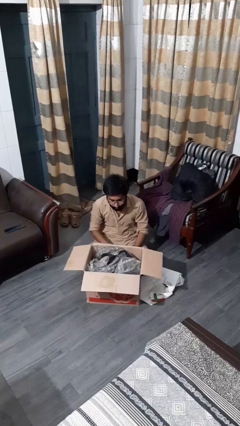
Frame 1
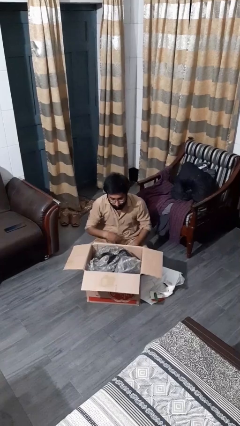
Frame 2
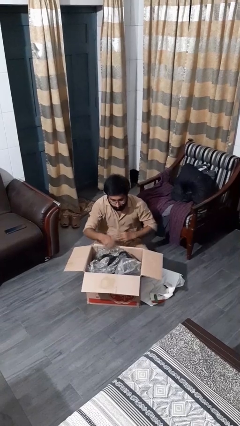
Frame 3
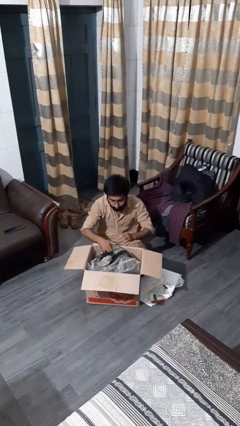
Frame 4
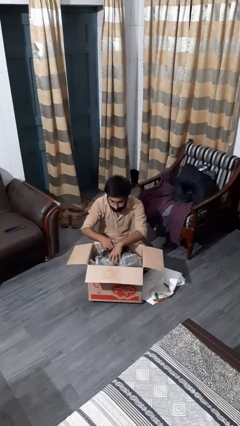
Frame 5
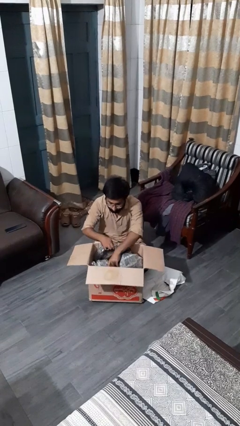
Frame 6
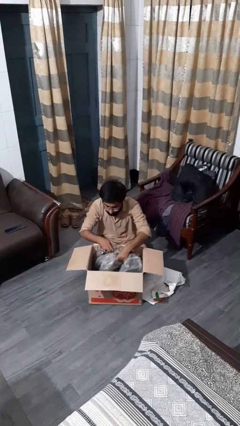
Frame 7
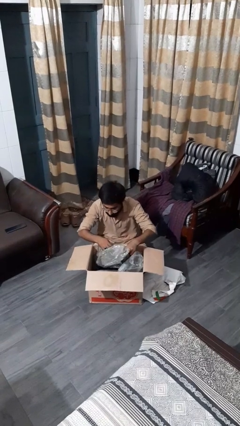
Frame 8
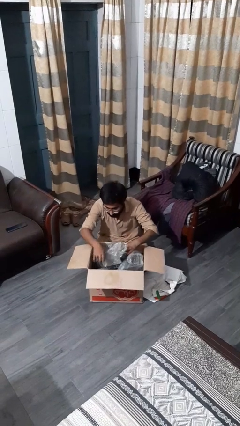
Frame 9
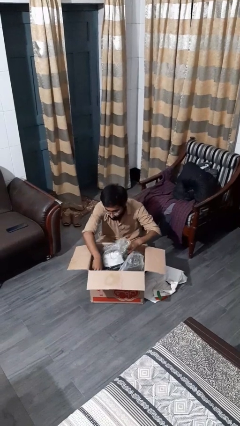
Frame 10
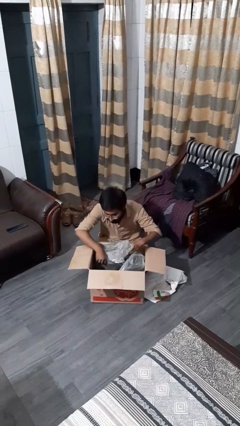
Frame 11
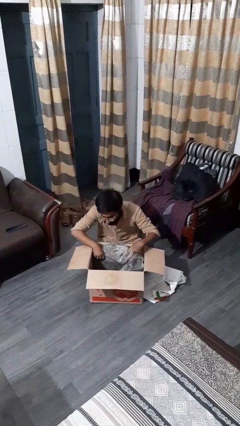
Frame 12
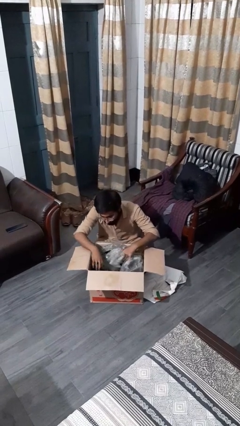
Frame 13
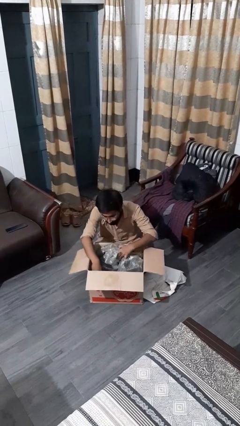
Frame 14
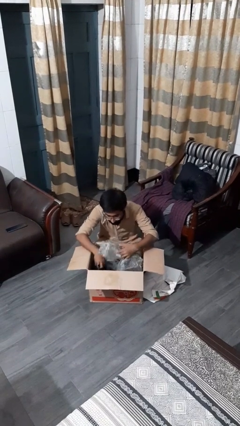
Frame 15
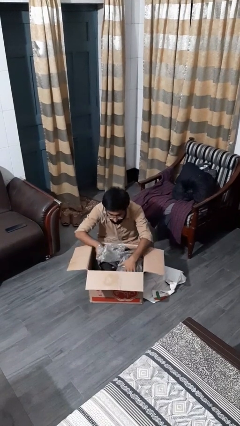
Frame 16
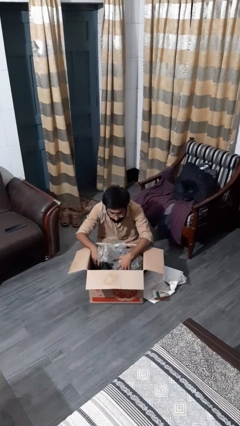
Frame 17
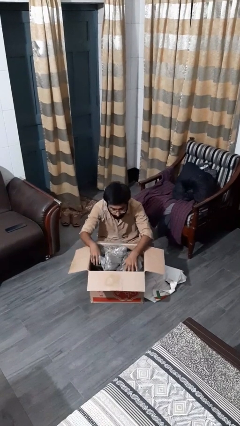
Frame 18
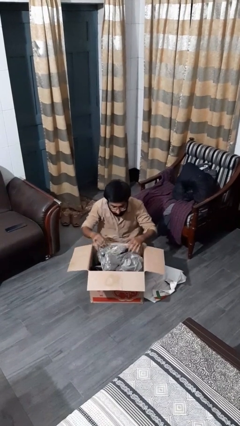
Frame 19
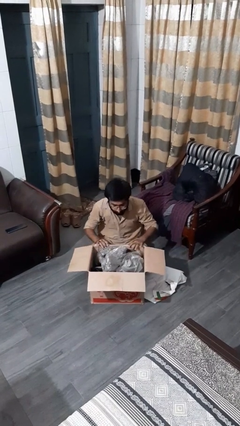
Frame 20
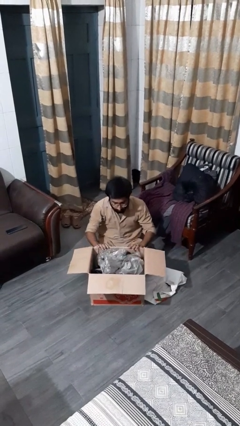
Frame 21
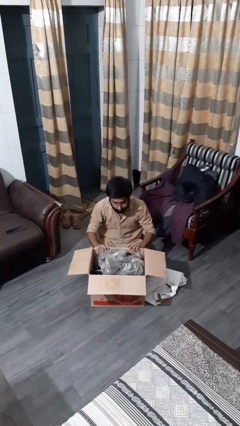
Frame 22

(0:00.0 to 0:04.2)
person searches in box

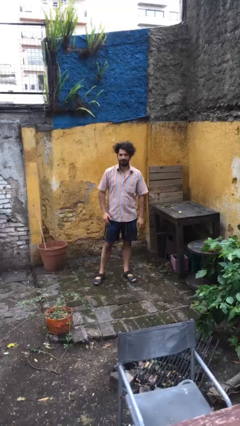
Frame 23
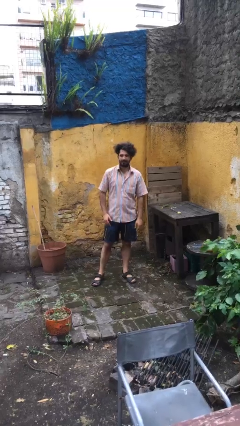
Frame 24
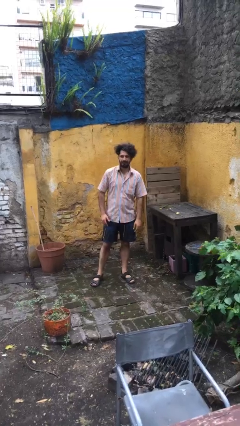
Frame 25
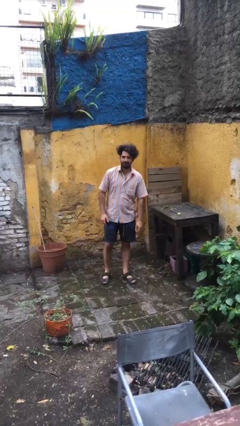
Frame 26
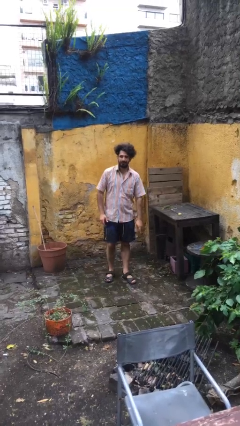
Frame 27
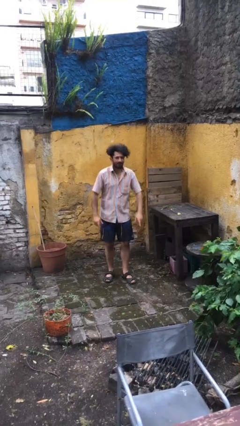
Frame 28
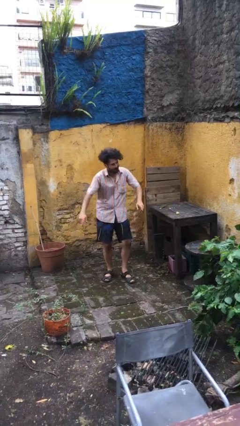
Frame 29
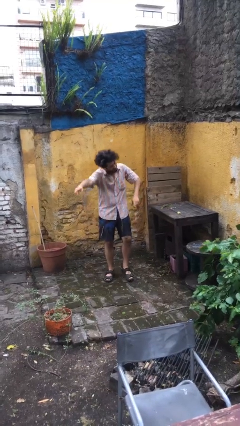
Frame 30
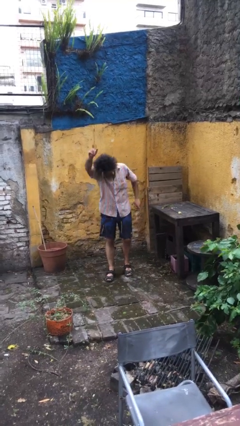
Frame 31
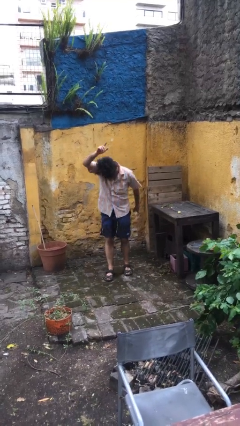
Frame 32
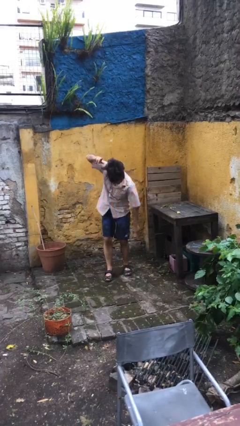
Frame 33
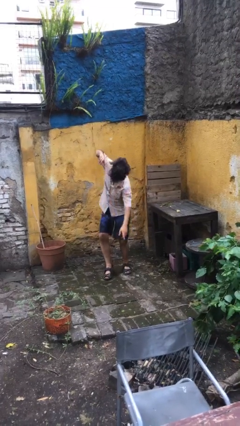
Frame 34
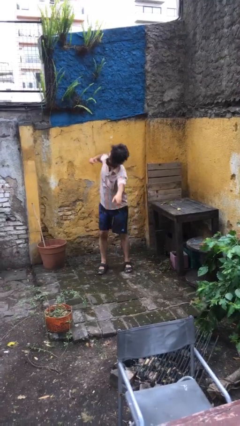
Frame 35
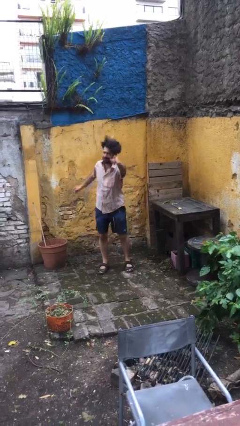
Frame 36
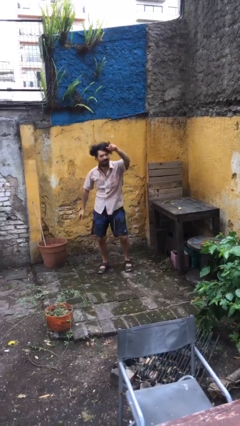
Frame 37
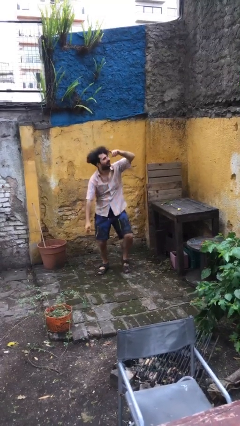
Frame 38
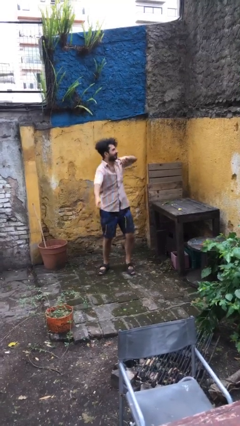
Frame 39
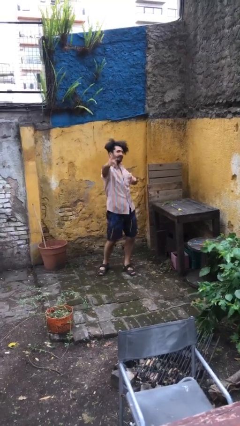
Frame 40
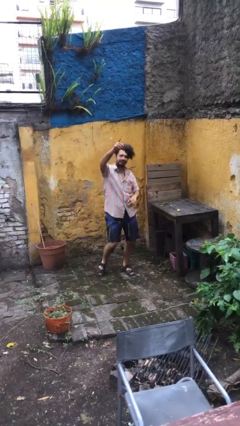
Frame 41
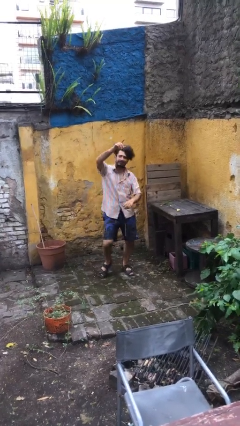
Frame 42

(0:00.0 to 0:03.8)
person dances in place

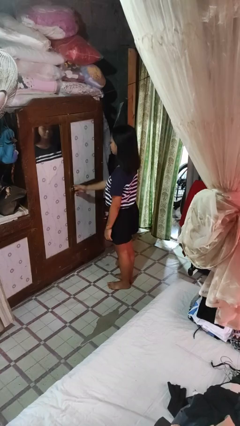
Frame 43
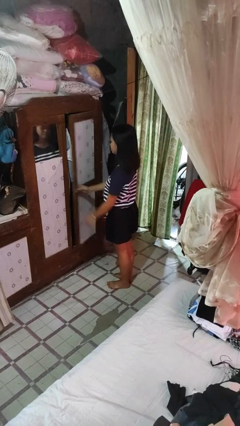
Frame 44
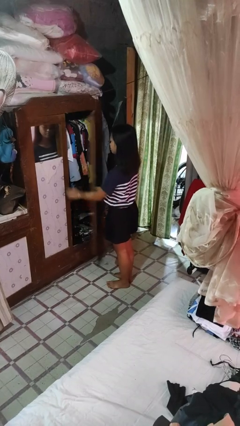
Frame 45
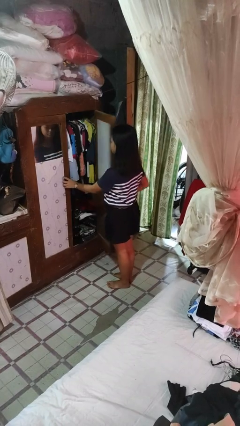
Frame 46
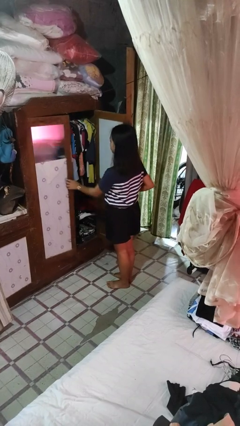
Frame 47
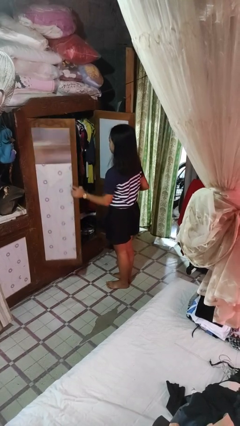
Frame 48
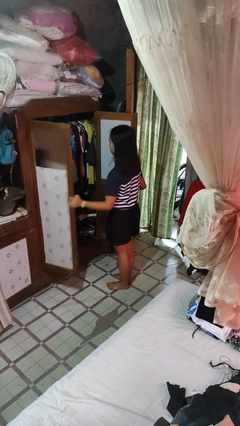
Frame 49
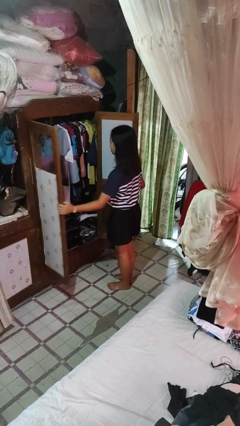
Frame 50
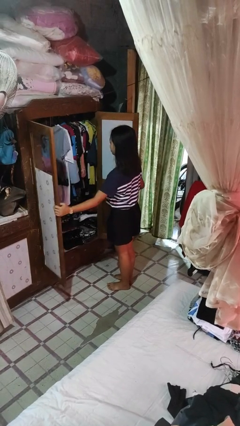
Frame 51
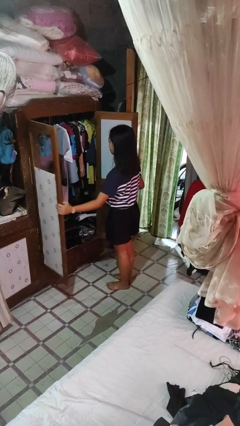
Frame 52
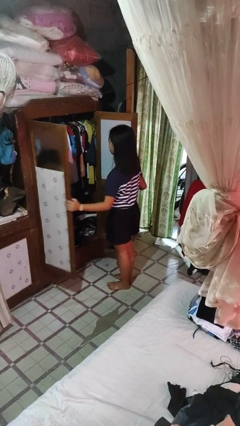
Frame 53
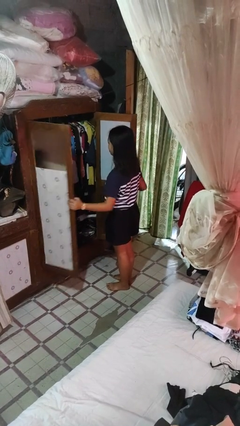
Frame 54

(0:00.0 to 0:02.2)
person opens closet door

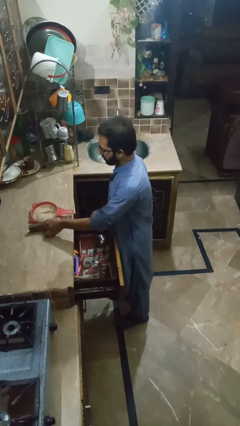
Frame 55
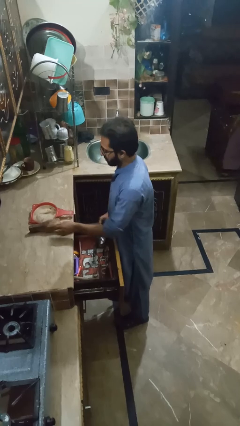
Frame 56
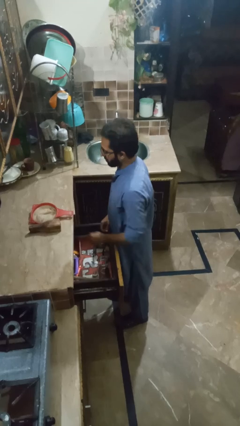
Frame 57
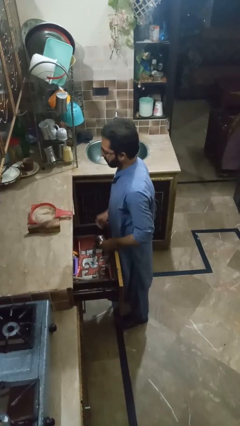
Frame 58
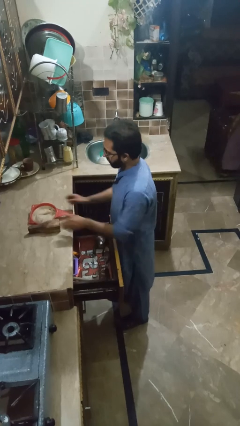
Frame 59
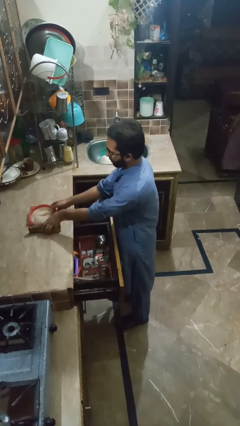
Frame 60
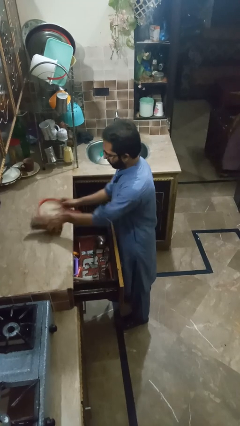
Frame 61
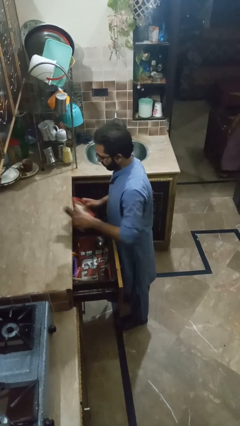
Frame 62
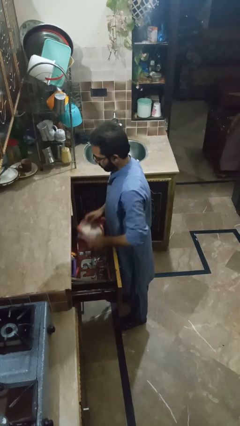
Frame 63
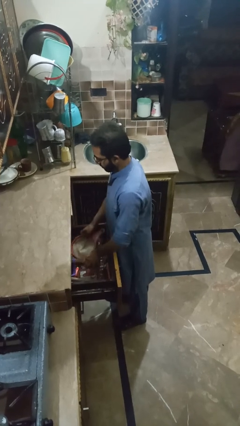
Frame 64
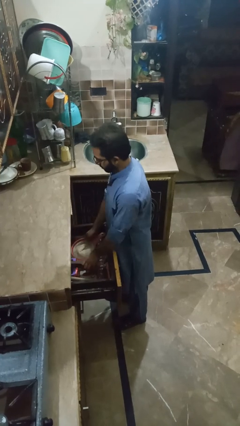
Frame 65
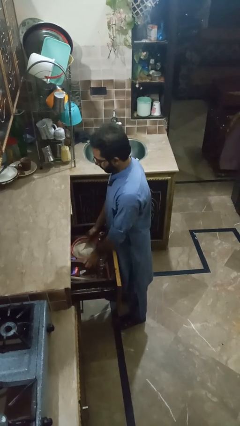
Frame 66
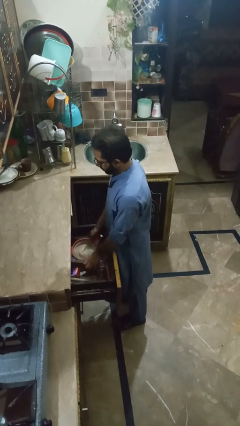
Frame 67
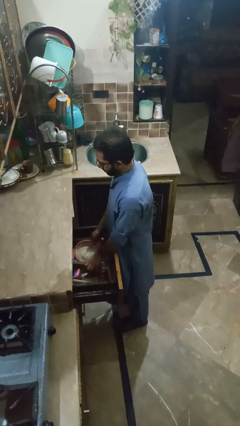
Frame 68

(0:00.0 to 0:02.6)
person takes object from kitchen drawer

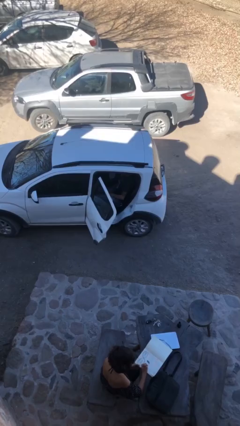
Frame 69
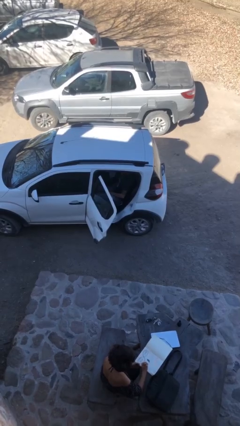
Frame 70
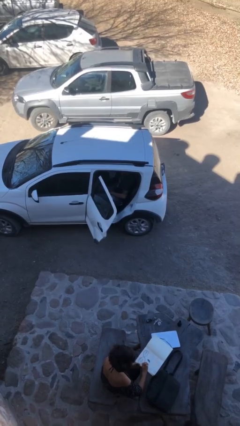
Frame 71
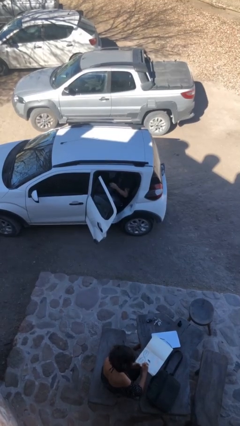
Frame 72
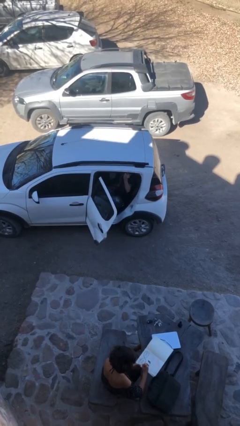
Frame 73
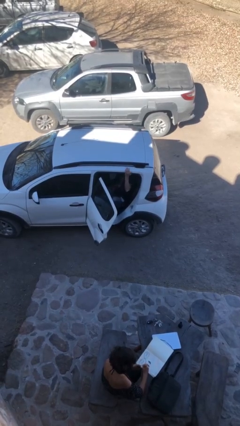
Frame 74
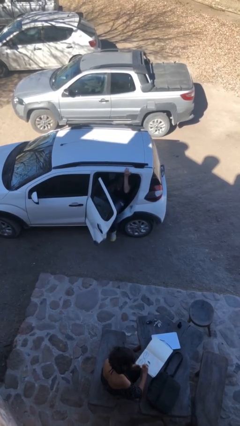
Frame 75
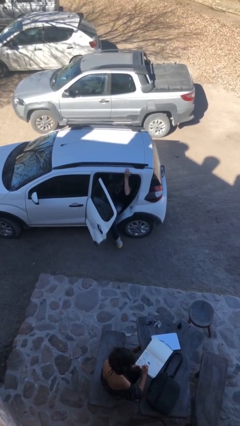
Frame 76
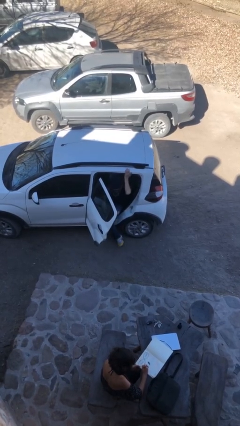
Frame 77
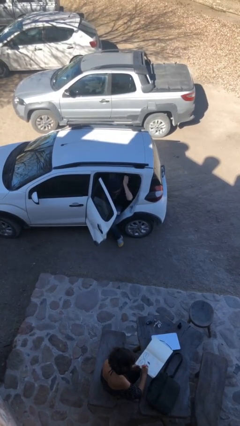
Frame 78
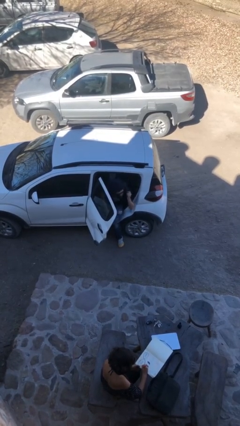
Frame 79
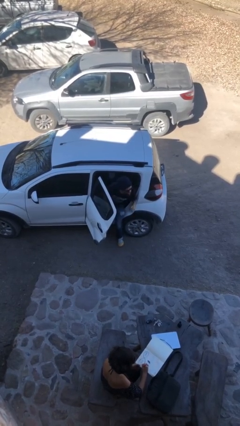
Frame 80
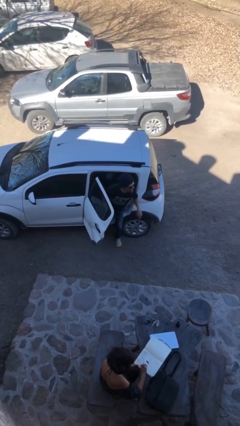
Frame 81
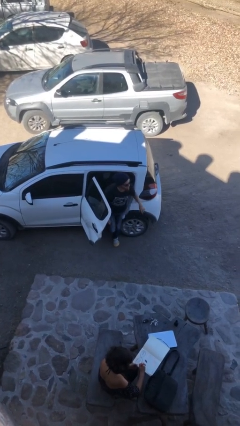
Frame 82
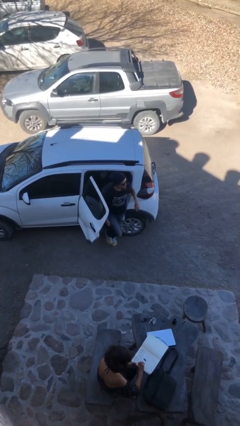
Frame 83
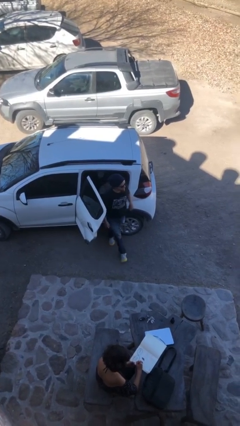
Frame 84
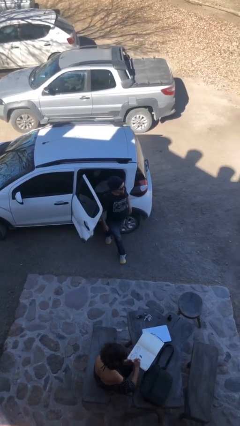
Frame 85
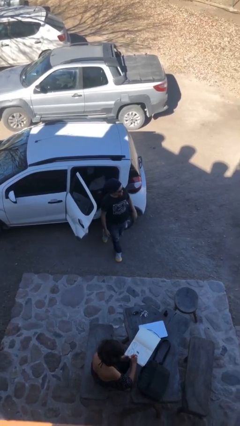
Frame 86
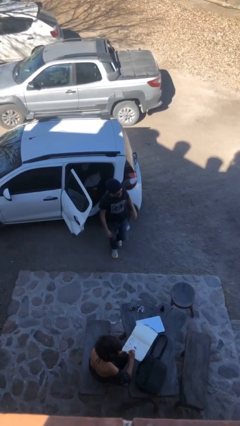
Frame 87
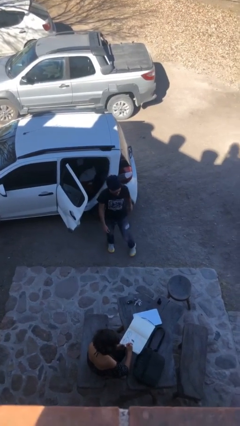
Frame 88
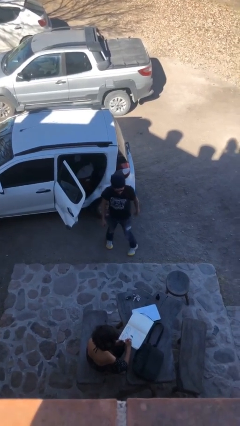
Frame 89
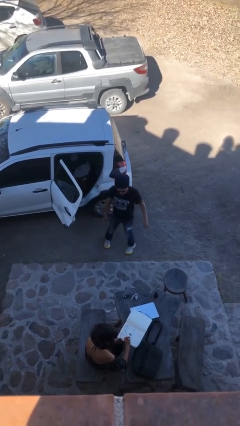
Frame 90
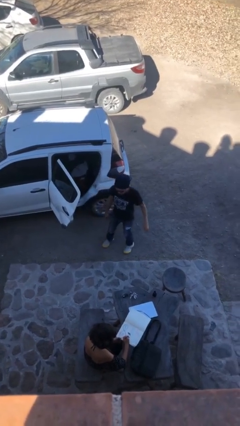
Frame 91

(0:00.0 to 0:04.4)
person exits car
